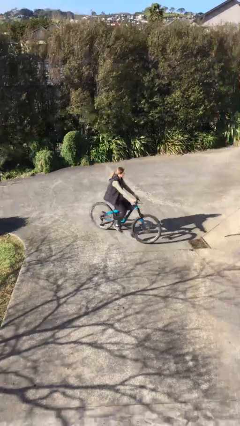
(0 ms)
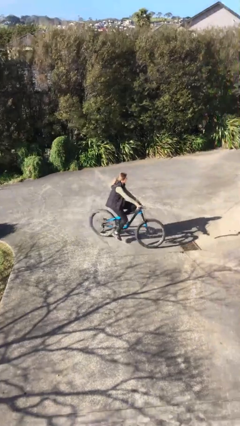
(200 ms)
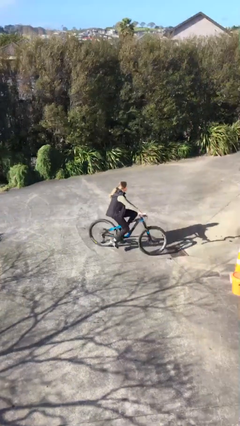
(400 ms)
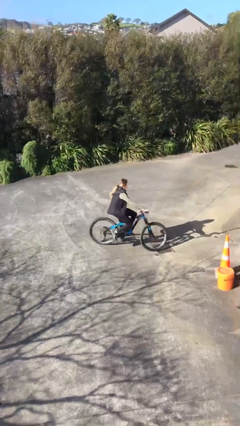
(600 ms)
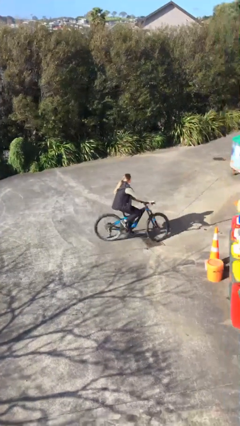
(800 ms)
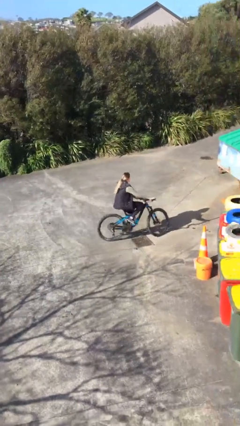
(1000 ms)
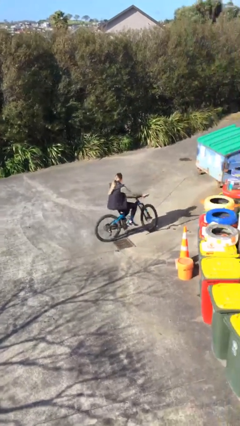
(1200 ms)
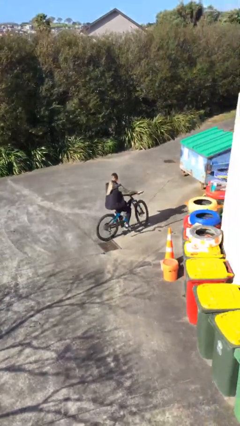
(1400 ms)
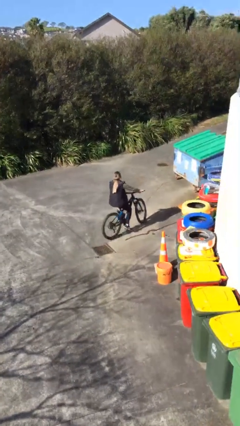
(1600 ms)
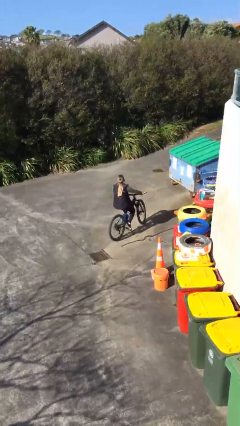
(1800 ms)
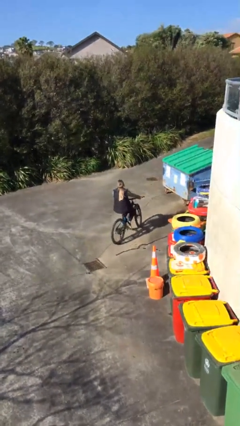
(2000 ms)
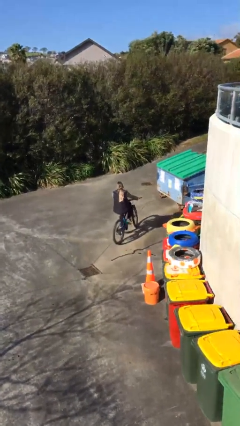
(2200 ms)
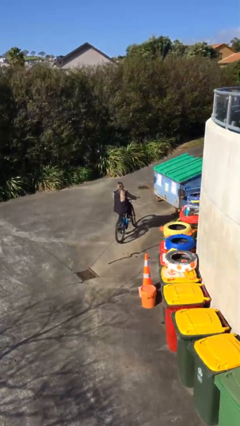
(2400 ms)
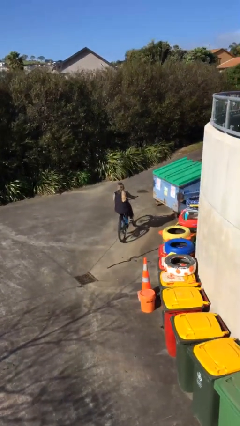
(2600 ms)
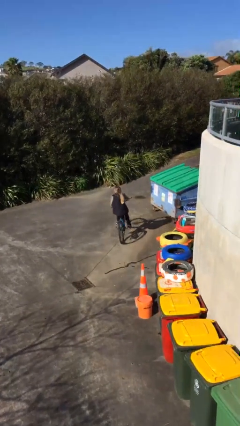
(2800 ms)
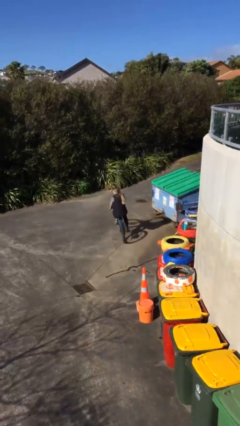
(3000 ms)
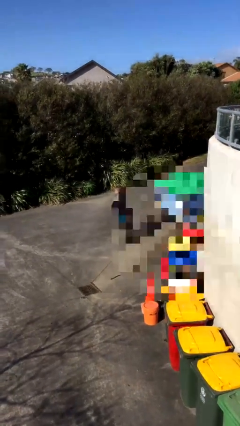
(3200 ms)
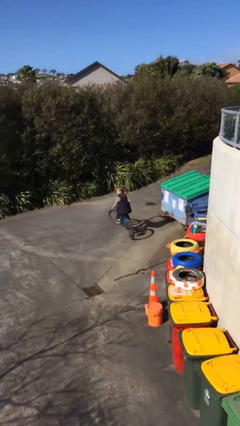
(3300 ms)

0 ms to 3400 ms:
person rides bicycle

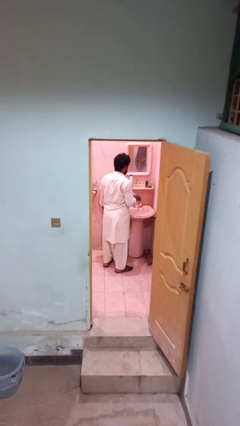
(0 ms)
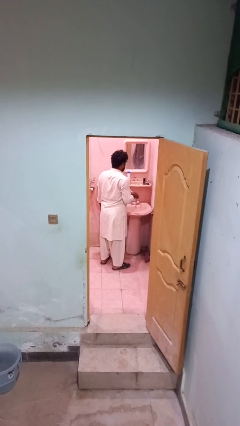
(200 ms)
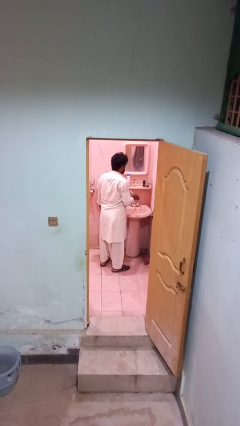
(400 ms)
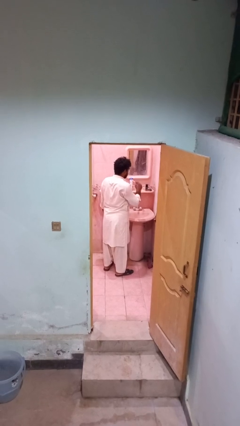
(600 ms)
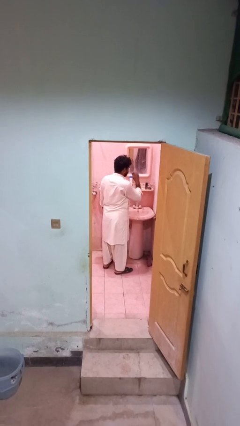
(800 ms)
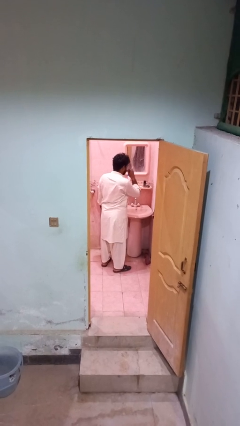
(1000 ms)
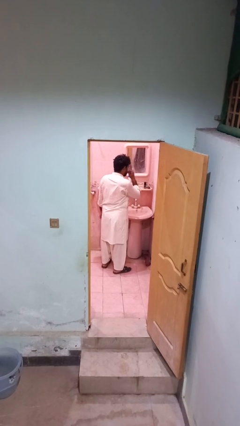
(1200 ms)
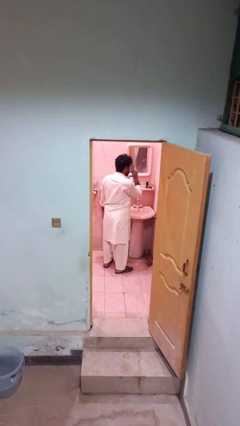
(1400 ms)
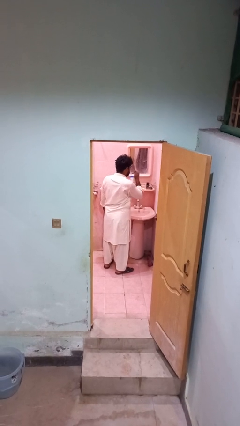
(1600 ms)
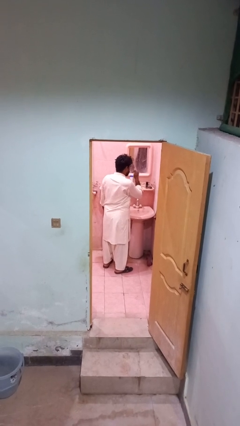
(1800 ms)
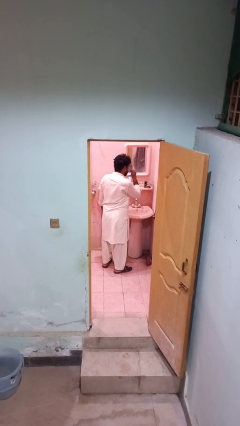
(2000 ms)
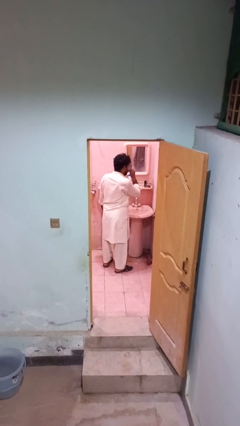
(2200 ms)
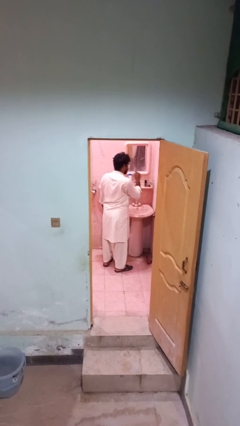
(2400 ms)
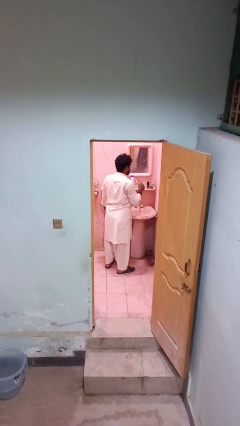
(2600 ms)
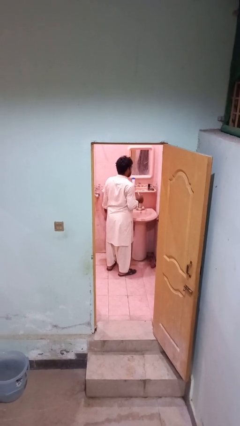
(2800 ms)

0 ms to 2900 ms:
person brushes teeth

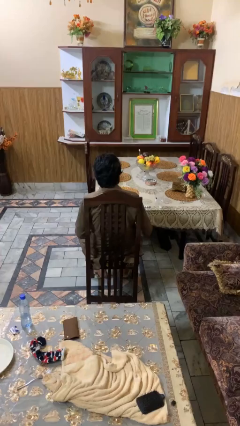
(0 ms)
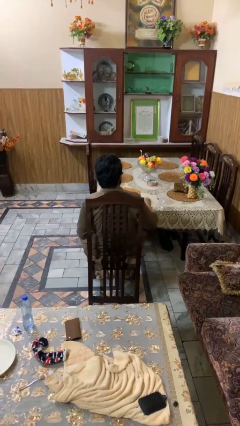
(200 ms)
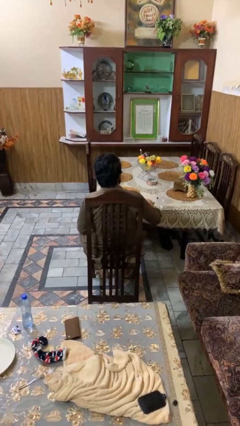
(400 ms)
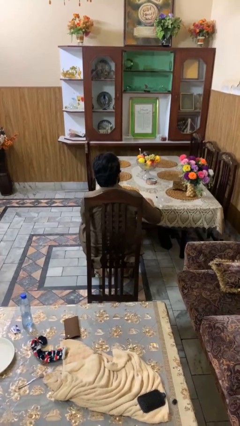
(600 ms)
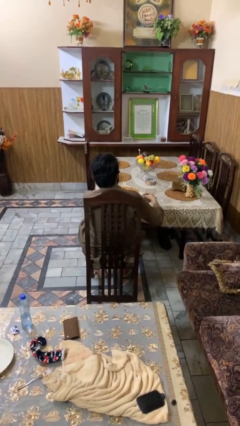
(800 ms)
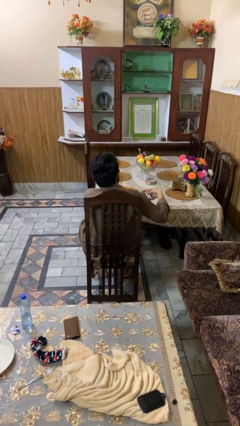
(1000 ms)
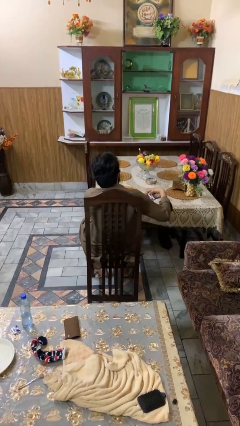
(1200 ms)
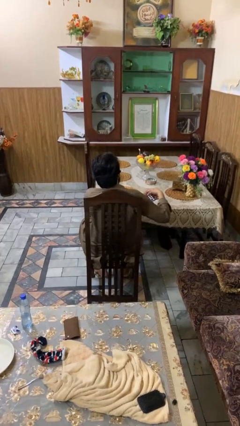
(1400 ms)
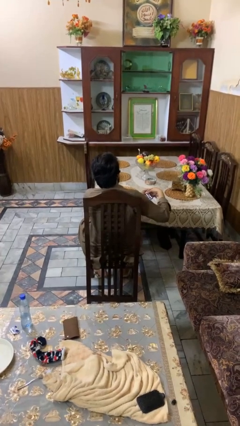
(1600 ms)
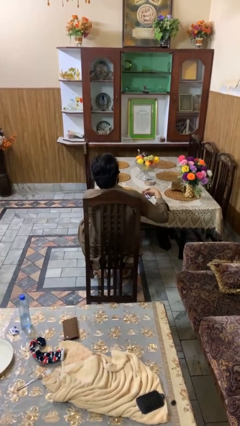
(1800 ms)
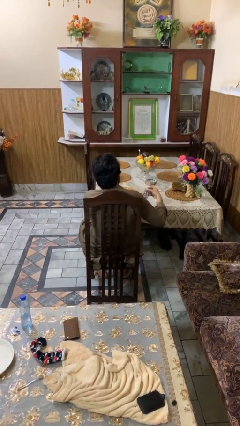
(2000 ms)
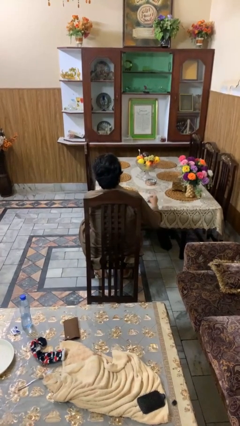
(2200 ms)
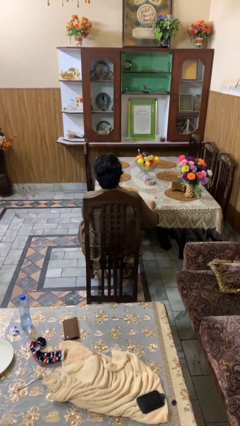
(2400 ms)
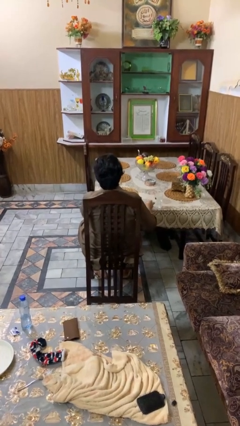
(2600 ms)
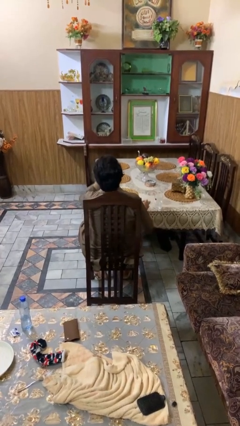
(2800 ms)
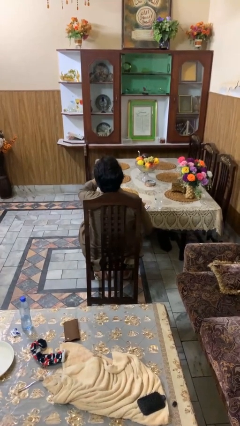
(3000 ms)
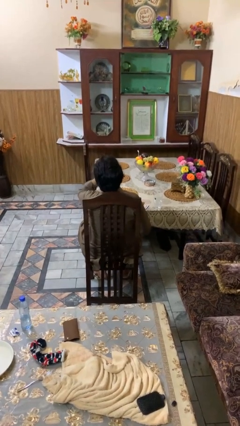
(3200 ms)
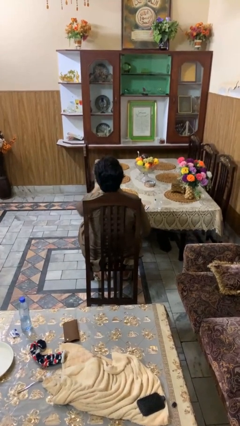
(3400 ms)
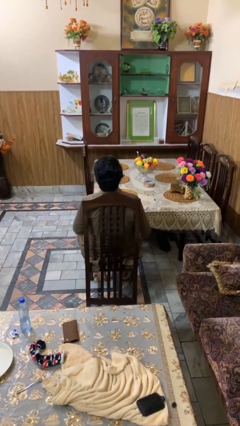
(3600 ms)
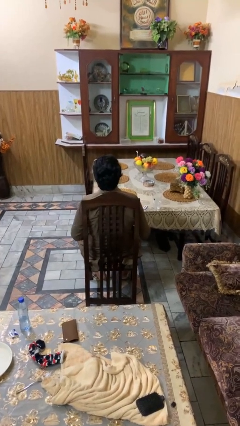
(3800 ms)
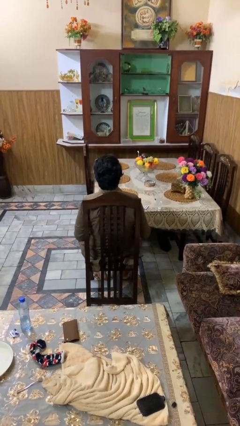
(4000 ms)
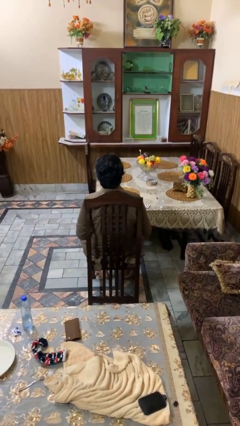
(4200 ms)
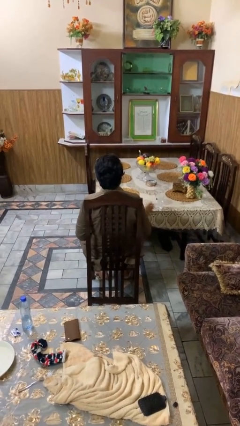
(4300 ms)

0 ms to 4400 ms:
person takes medicine pills

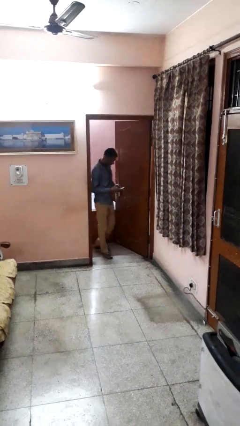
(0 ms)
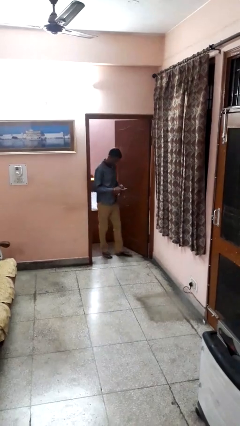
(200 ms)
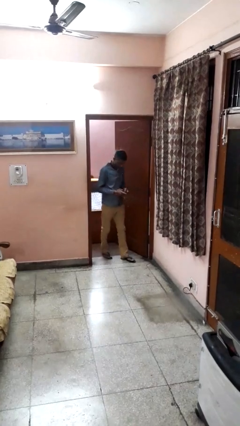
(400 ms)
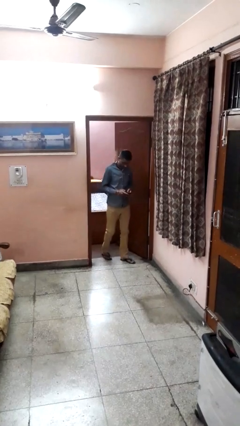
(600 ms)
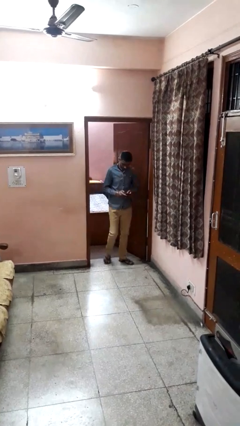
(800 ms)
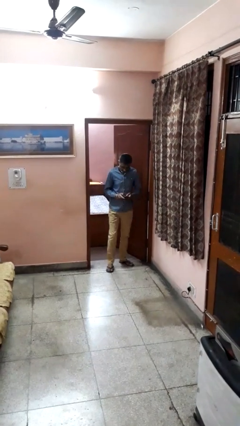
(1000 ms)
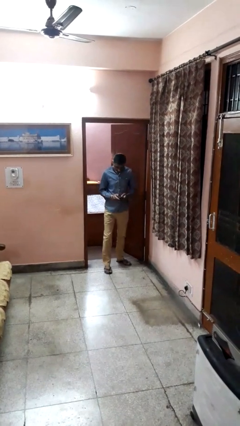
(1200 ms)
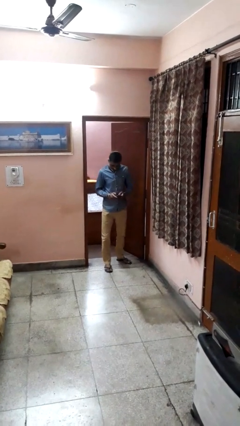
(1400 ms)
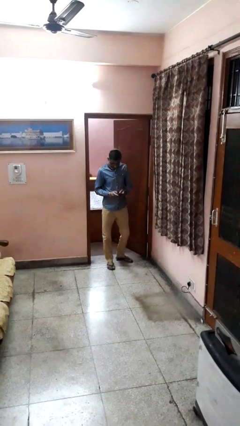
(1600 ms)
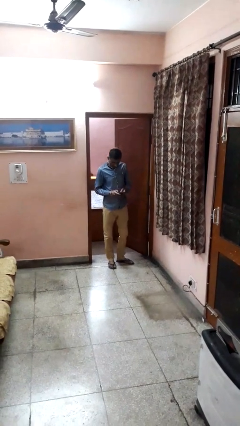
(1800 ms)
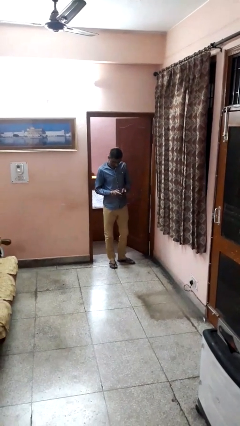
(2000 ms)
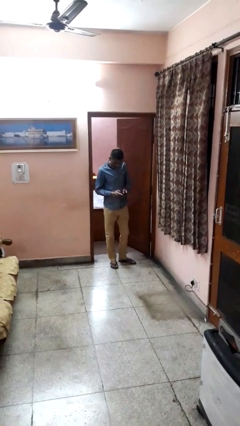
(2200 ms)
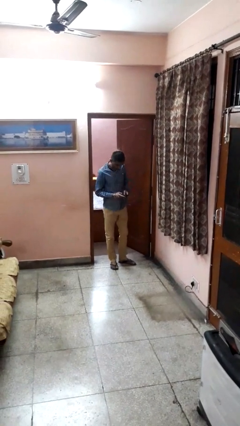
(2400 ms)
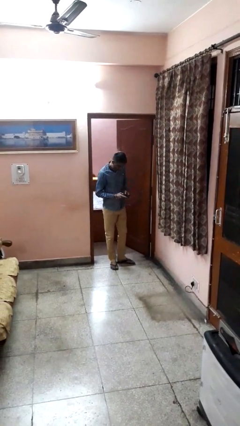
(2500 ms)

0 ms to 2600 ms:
person enters scene through structure

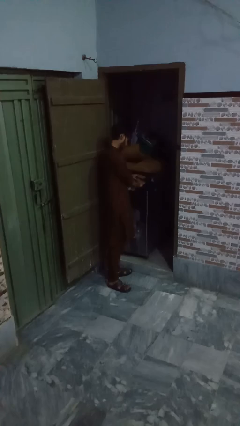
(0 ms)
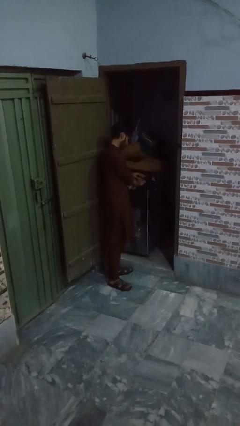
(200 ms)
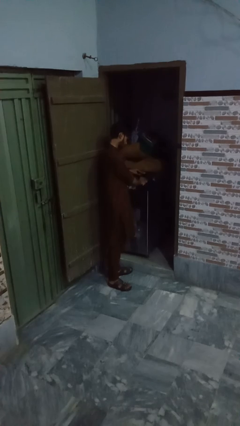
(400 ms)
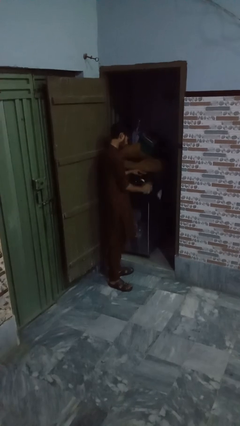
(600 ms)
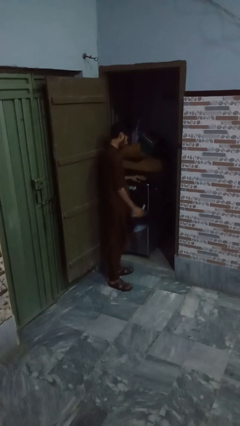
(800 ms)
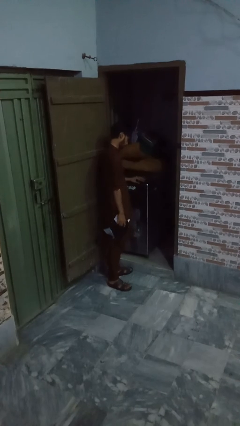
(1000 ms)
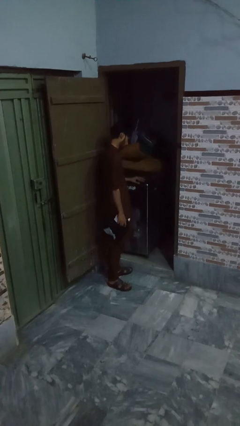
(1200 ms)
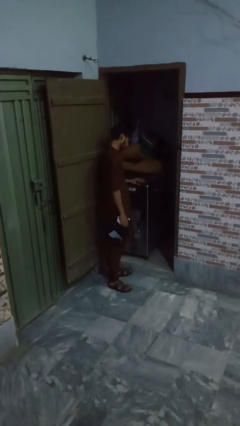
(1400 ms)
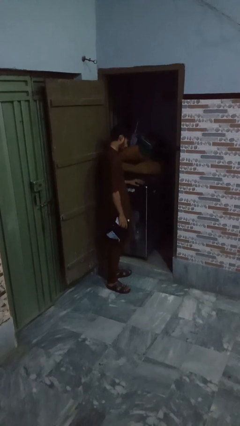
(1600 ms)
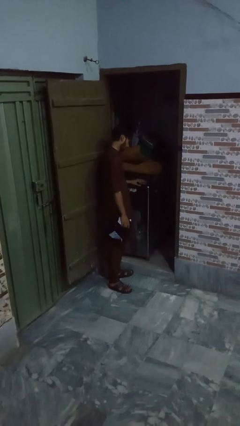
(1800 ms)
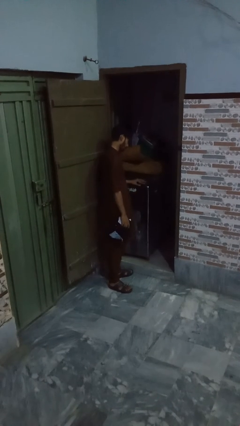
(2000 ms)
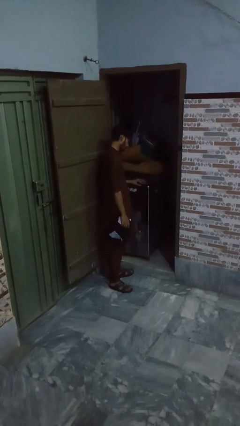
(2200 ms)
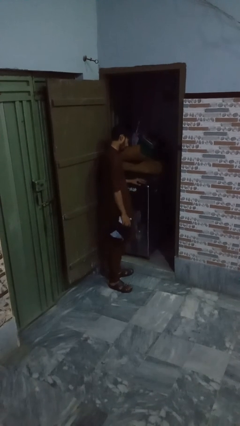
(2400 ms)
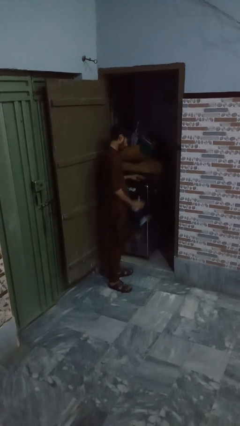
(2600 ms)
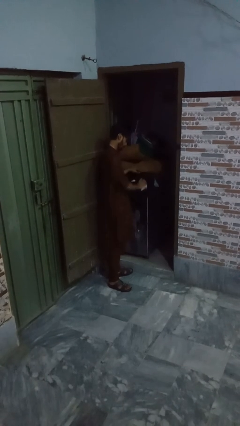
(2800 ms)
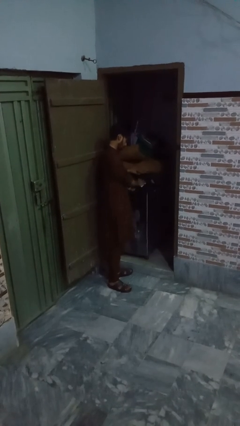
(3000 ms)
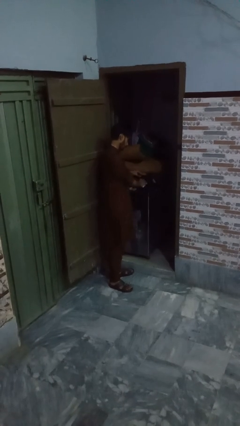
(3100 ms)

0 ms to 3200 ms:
person unloads dryer

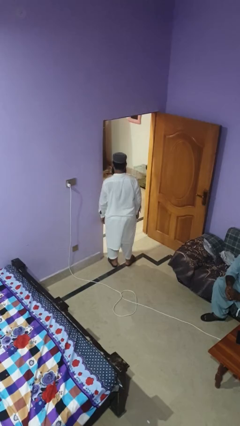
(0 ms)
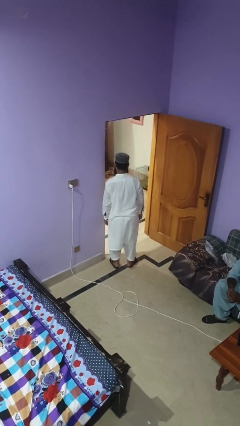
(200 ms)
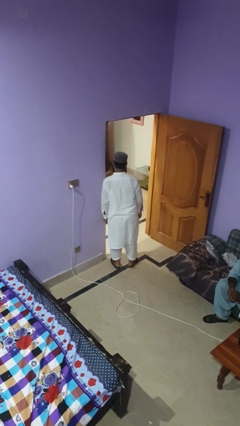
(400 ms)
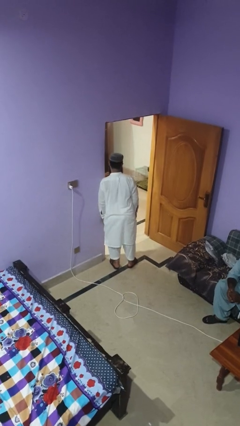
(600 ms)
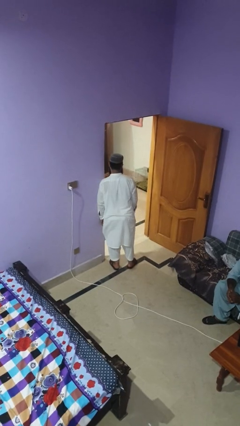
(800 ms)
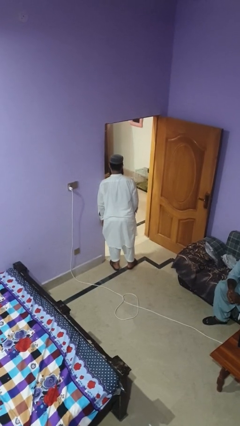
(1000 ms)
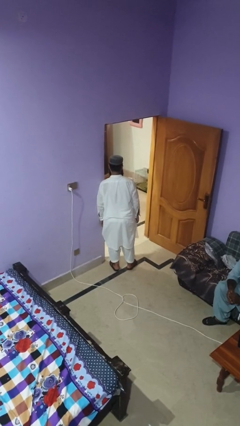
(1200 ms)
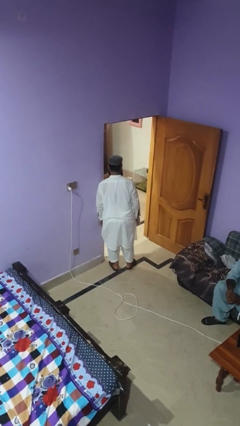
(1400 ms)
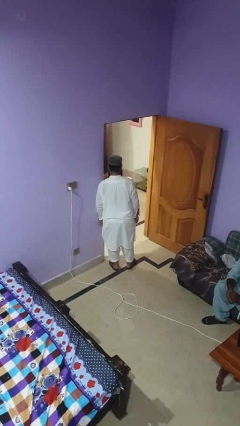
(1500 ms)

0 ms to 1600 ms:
person bumps into wall
